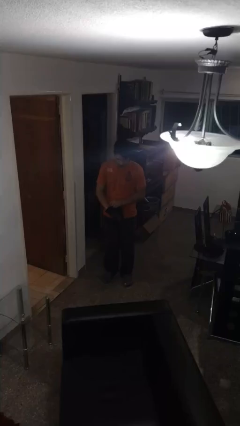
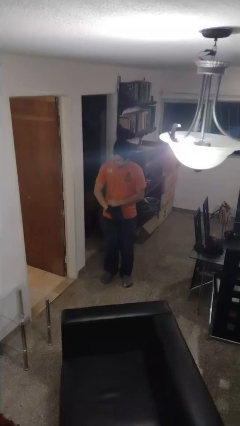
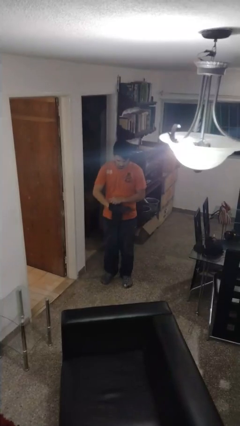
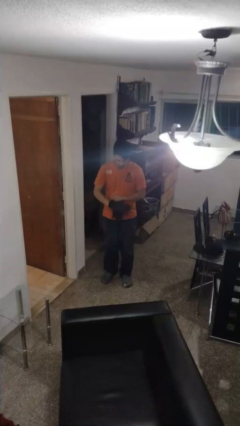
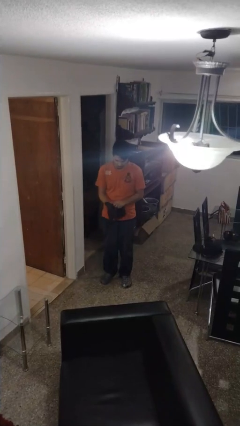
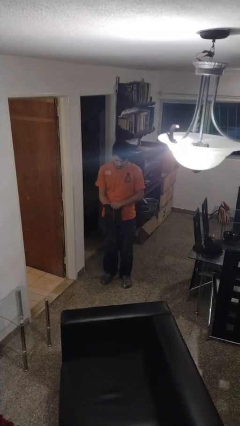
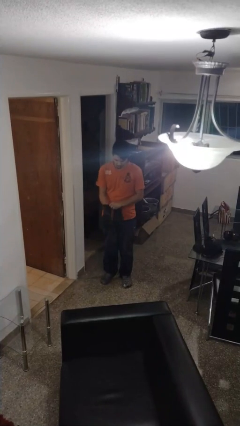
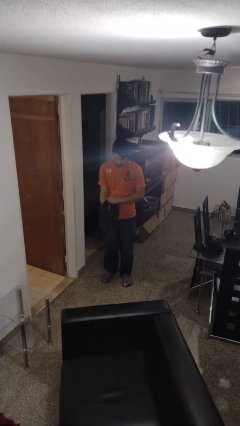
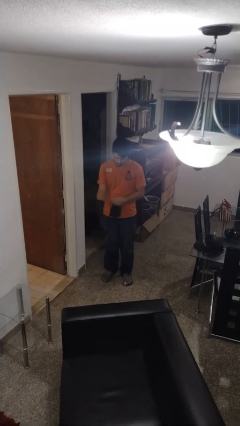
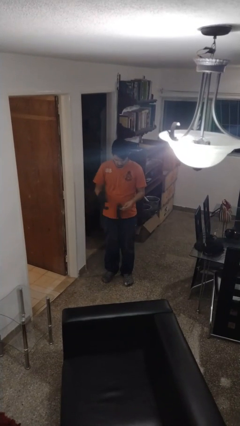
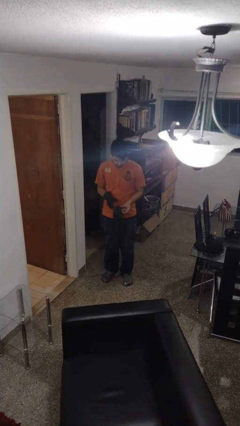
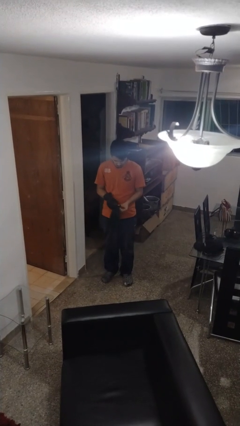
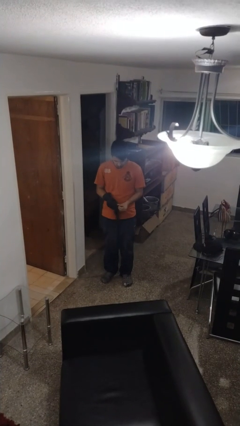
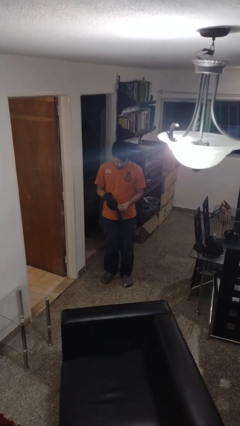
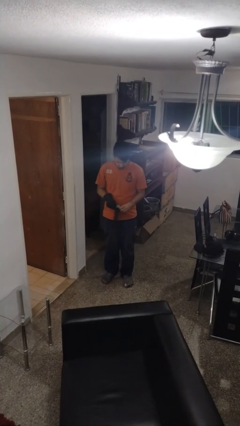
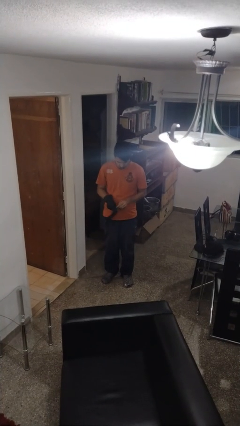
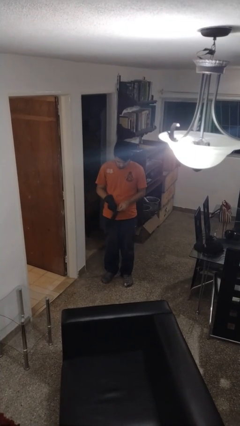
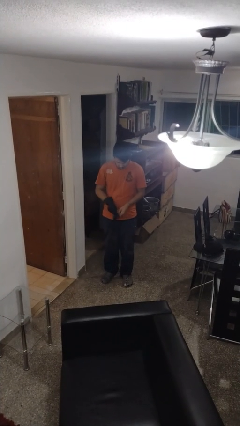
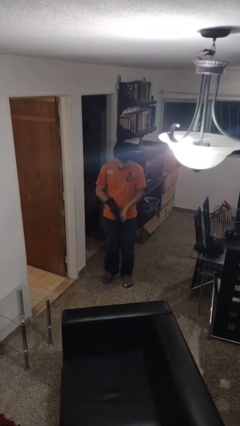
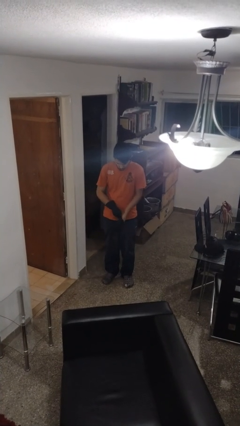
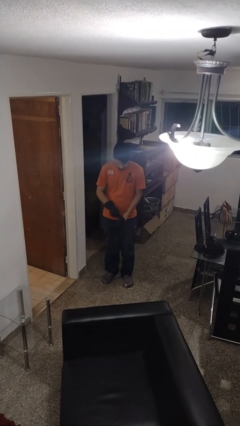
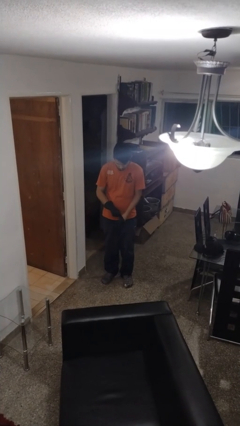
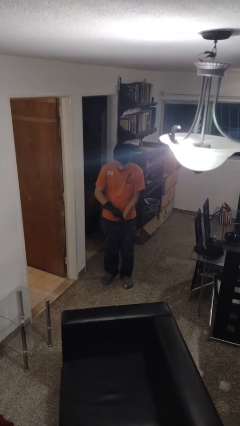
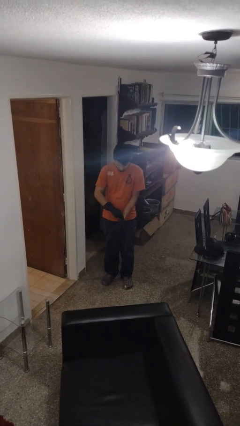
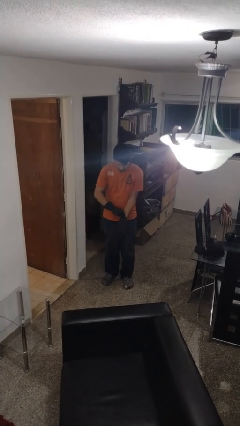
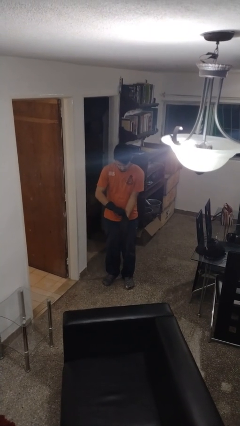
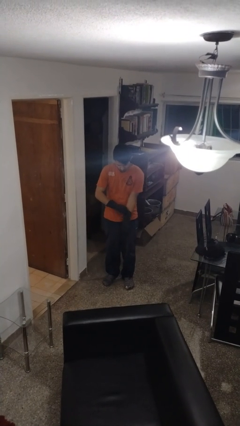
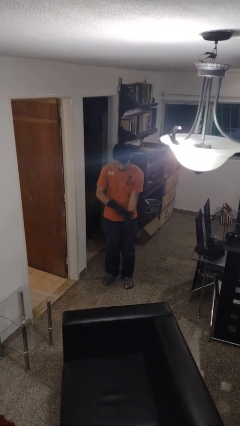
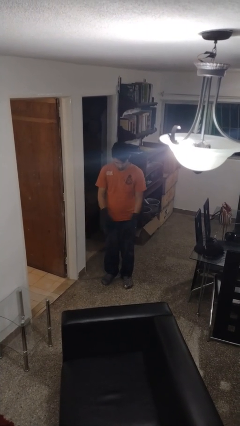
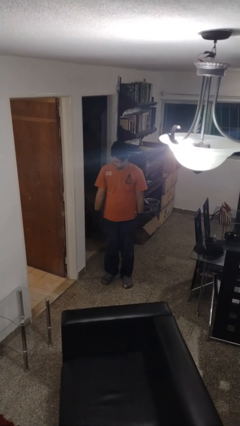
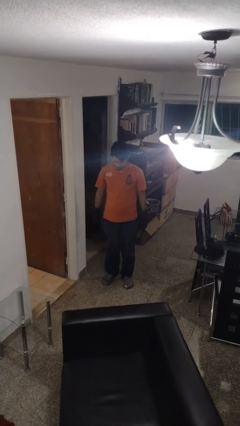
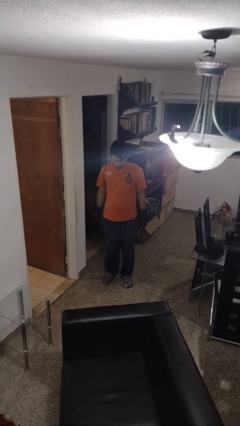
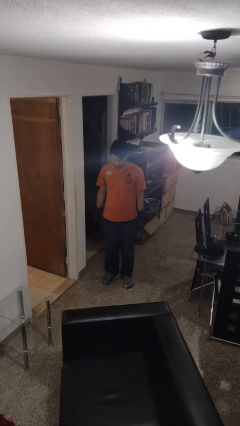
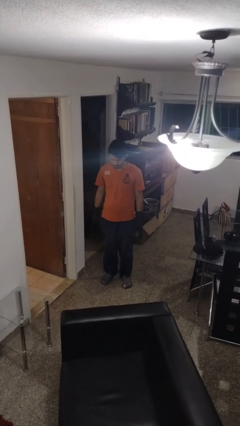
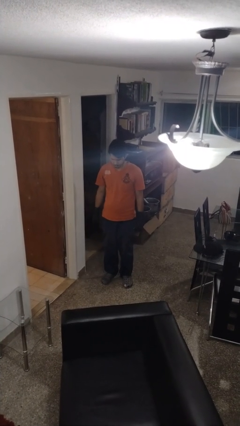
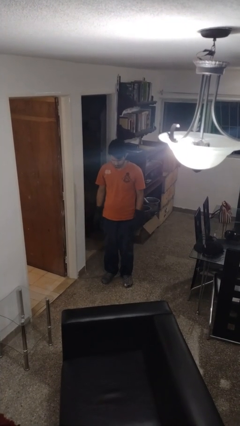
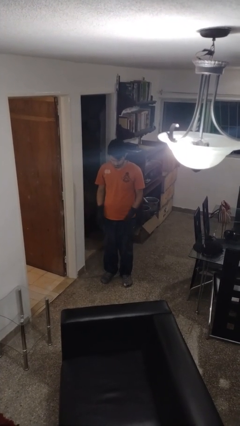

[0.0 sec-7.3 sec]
person puts on gloves

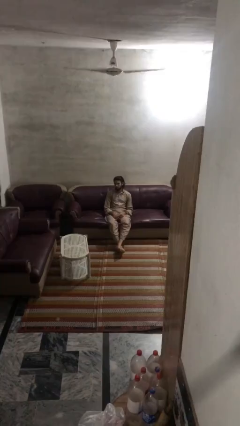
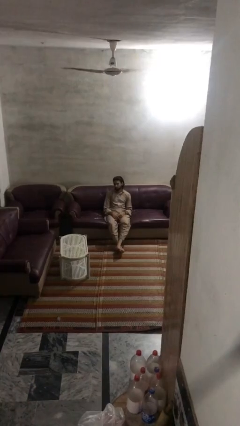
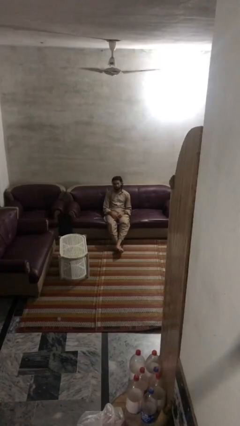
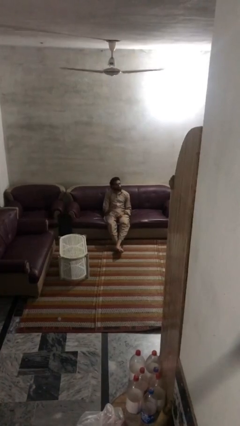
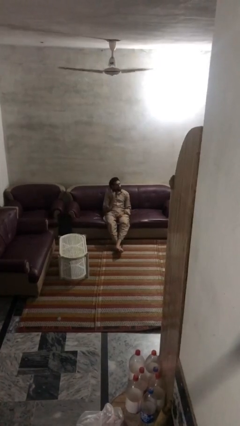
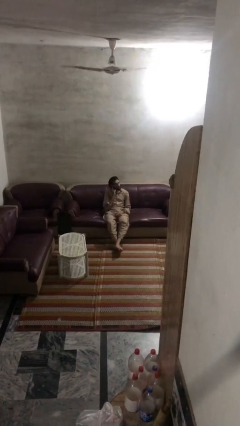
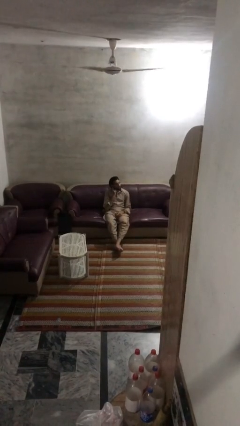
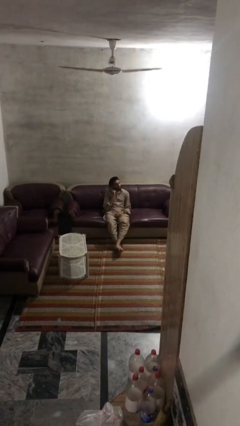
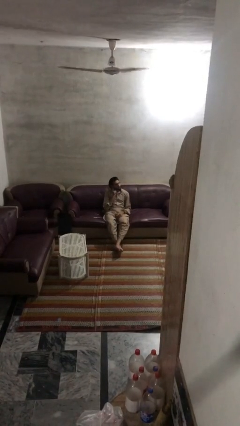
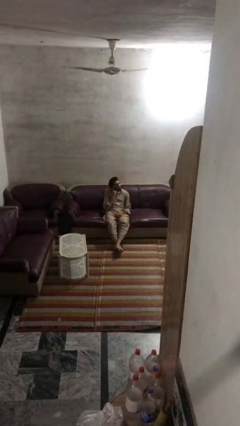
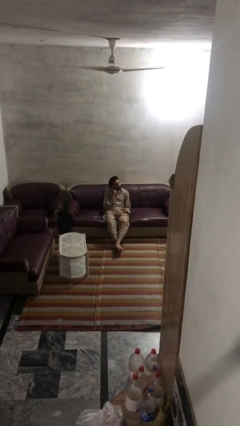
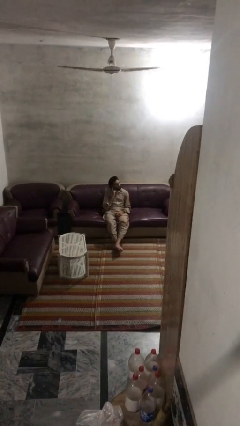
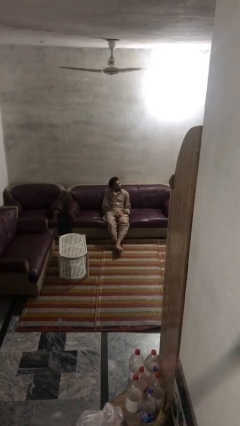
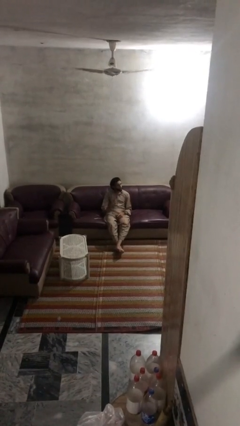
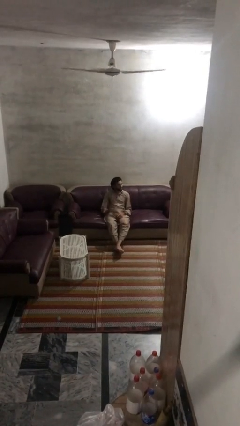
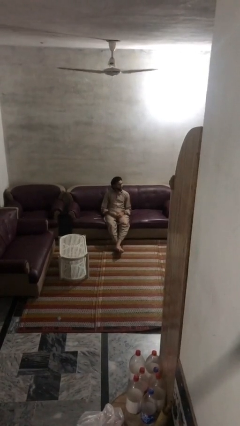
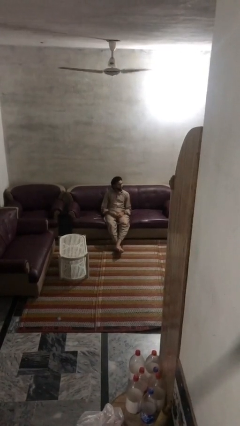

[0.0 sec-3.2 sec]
person gestures listen closely

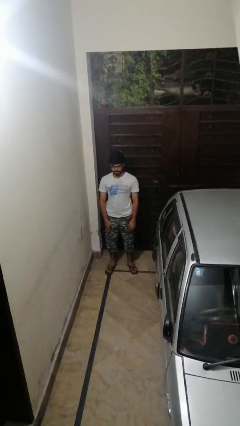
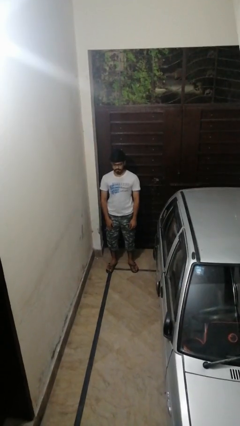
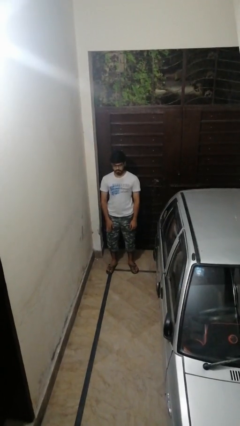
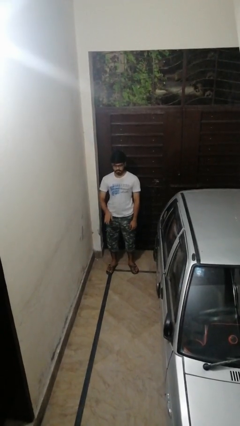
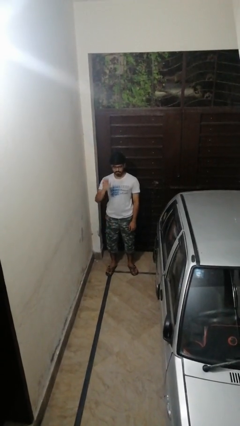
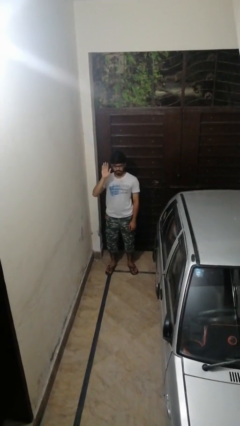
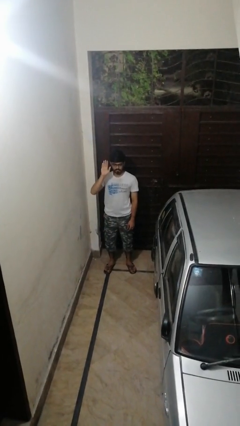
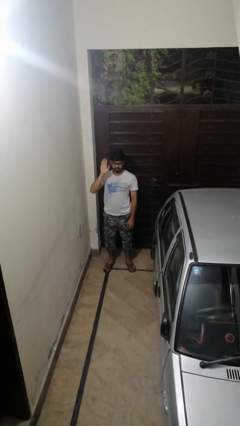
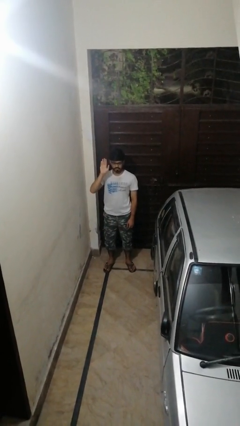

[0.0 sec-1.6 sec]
person gestures raise hand

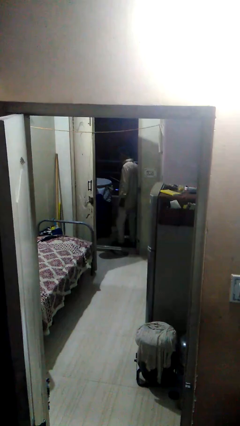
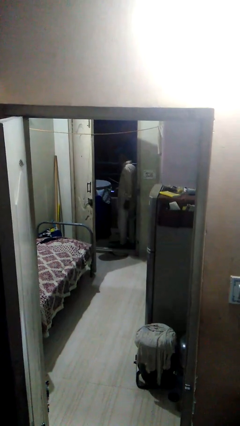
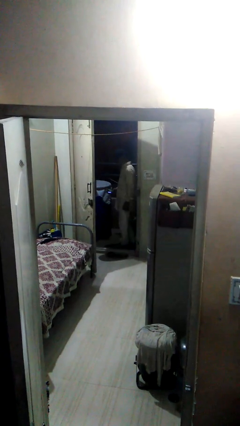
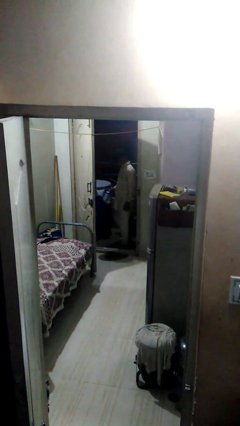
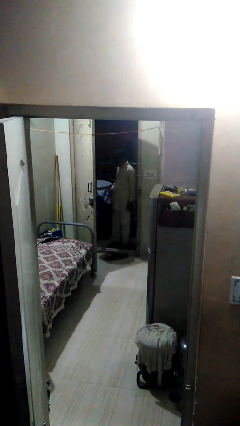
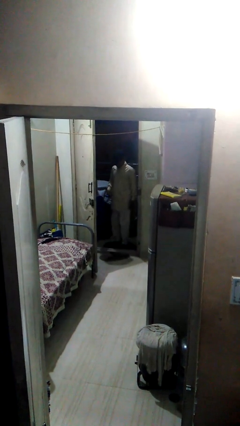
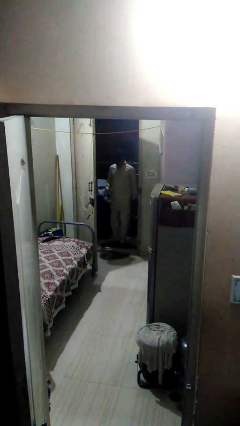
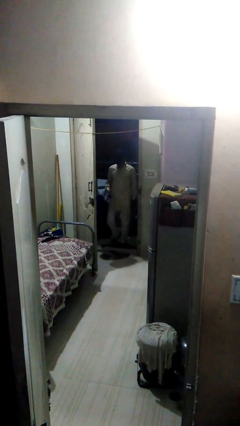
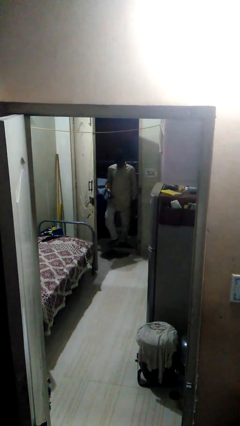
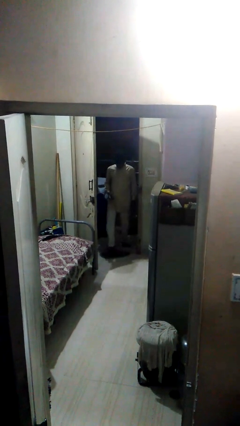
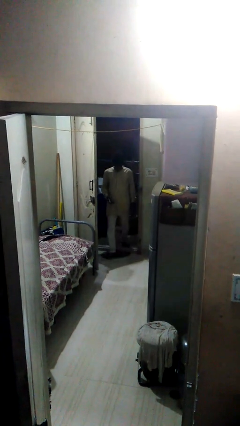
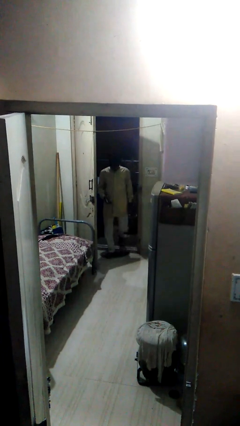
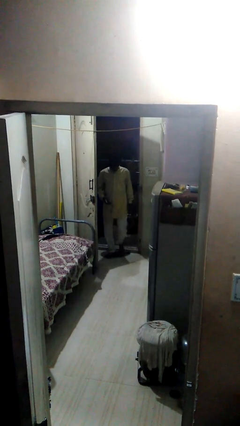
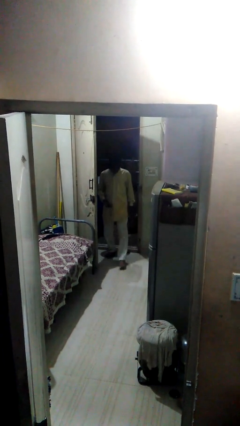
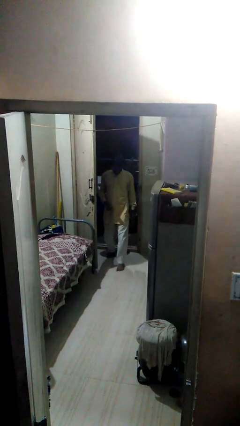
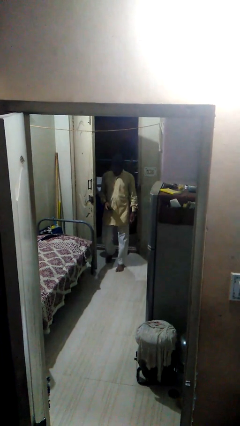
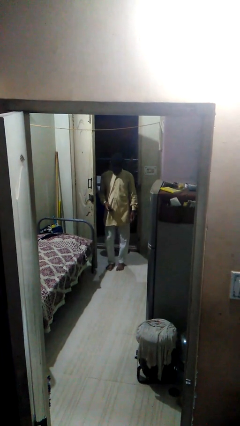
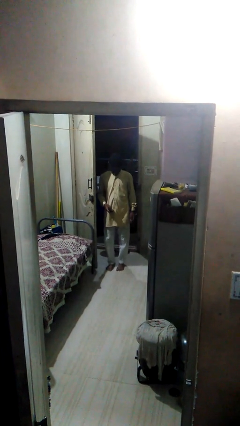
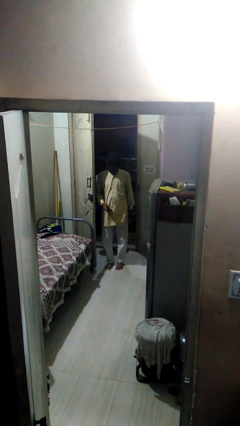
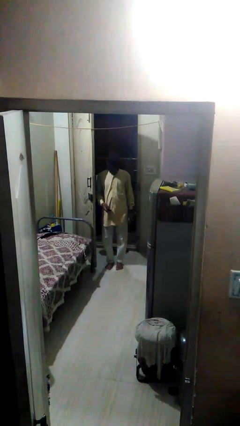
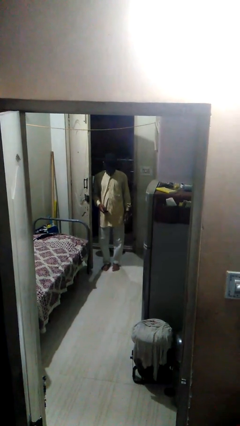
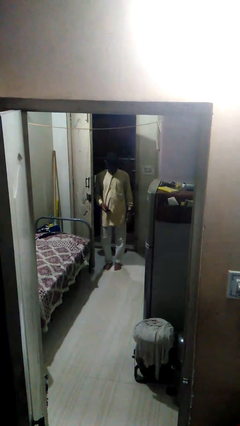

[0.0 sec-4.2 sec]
person enters scene through structure

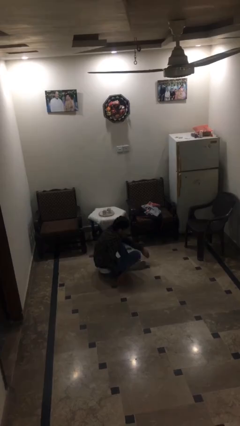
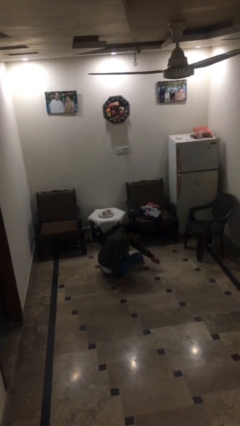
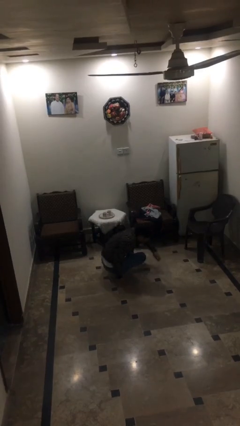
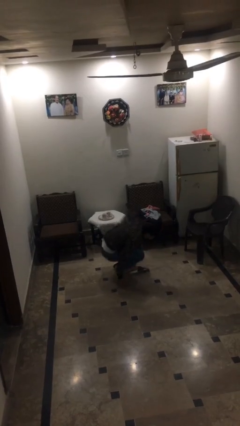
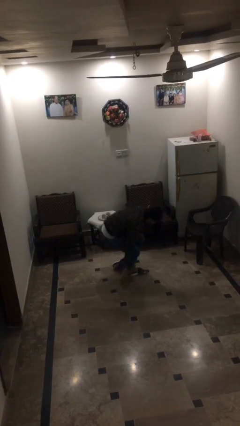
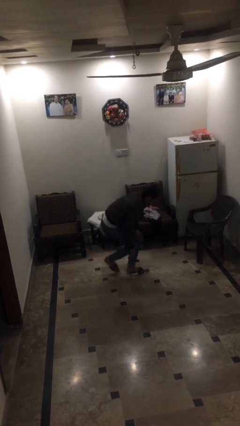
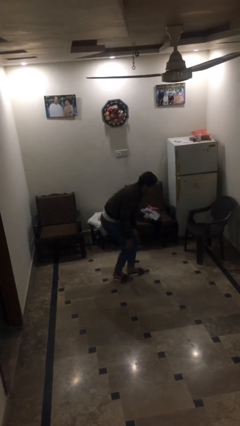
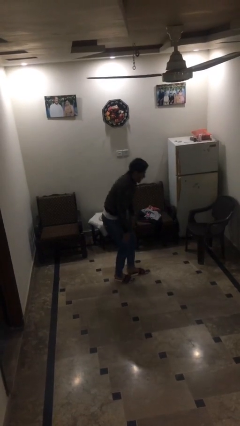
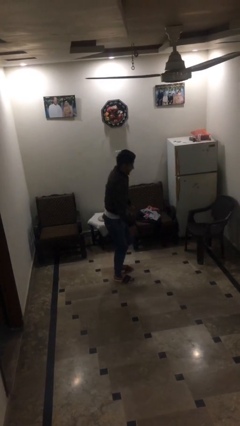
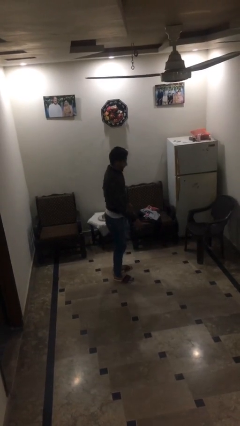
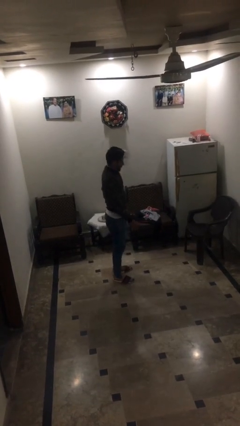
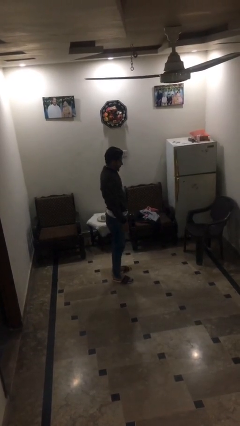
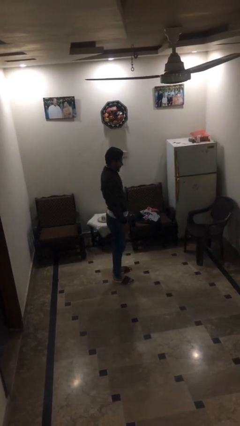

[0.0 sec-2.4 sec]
person stands up
